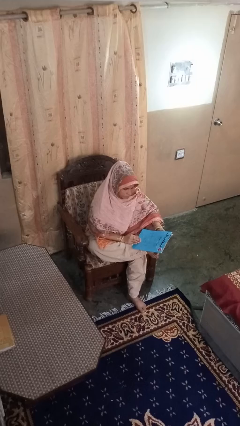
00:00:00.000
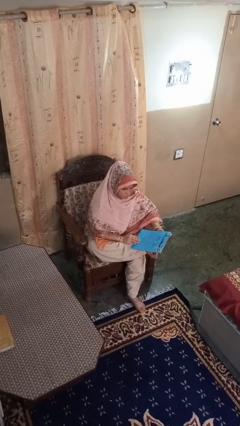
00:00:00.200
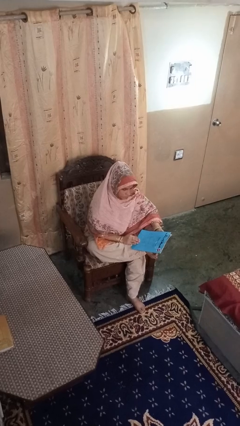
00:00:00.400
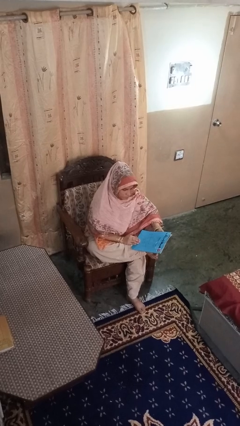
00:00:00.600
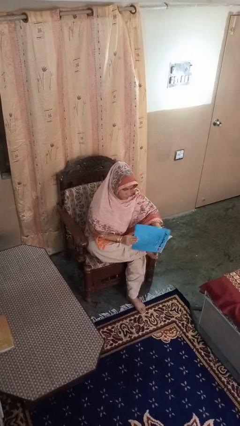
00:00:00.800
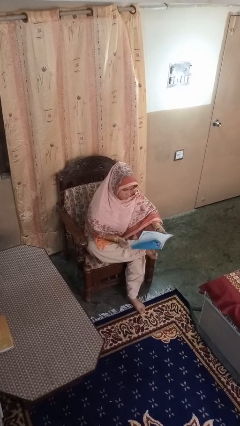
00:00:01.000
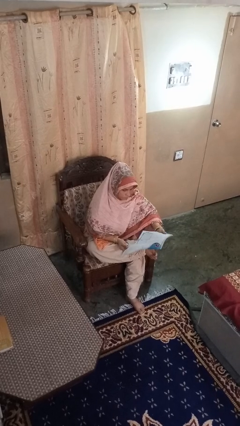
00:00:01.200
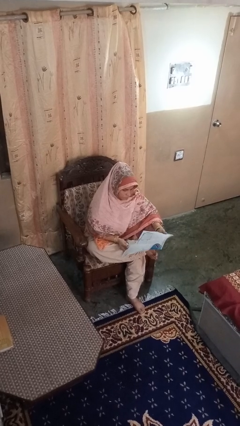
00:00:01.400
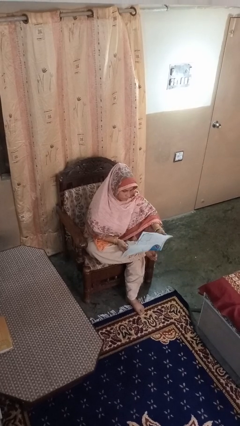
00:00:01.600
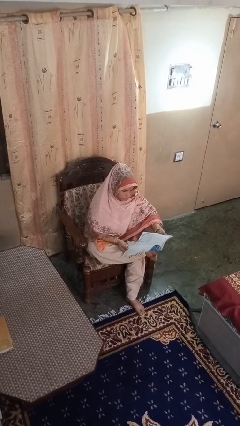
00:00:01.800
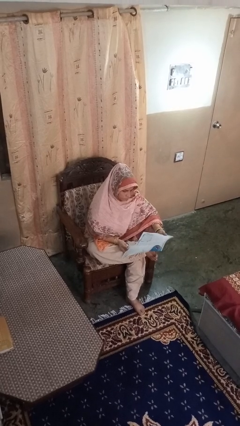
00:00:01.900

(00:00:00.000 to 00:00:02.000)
person reads magazine

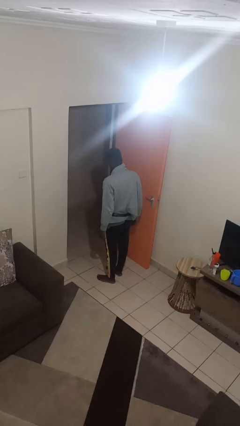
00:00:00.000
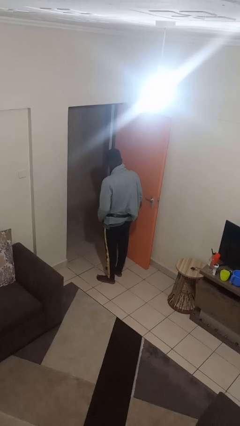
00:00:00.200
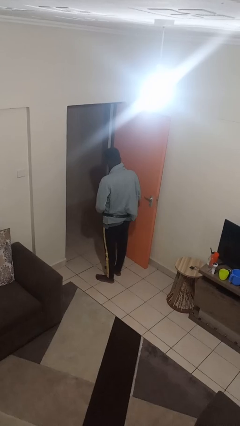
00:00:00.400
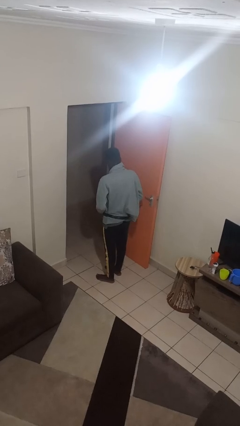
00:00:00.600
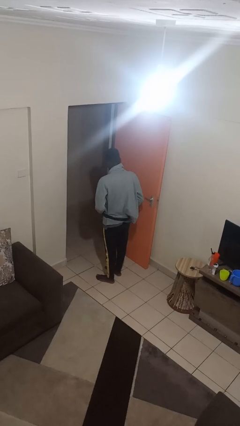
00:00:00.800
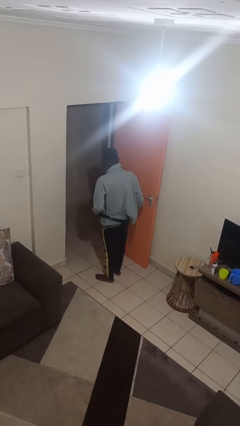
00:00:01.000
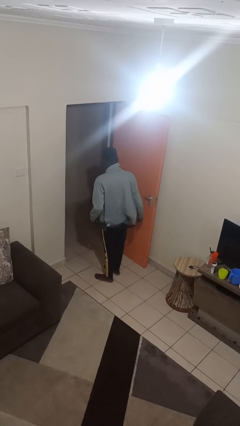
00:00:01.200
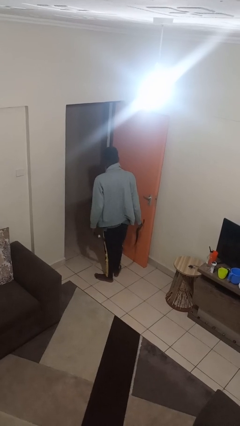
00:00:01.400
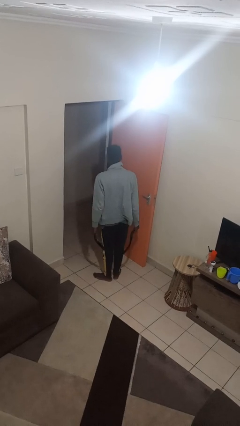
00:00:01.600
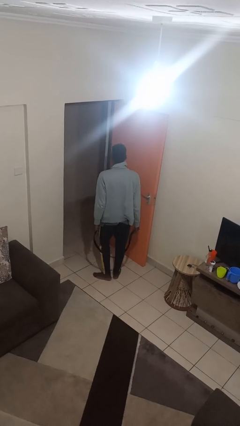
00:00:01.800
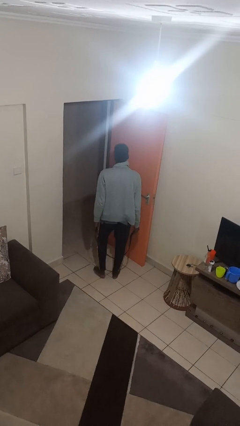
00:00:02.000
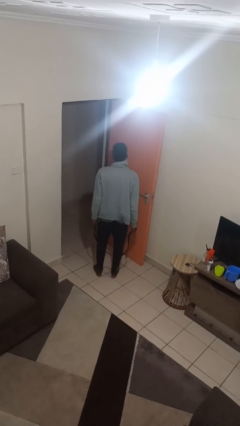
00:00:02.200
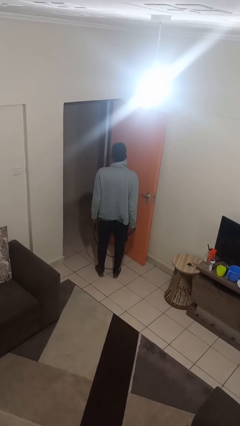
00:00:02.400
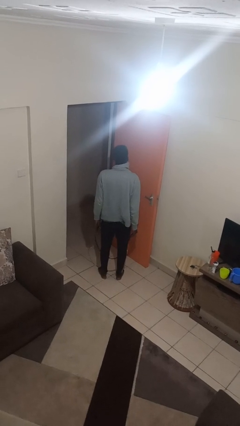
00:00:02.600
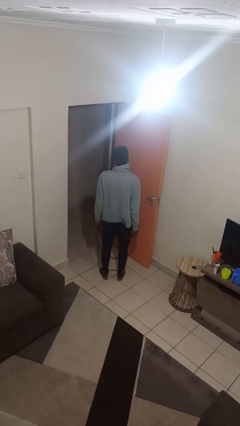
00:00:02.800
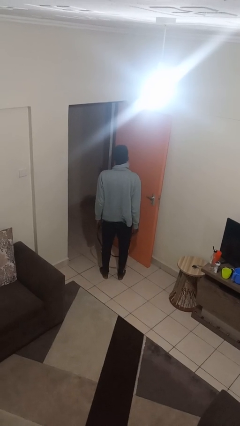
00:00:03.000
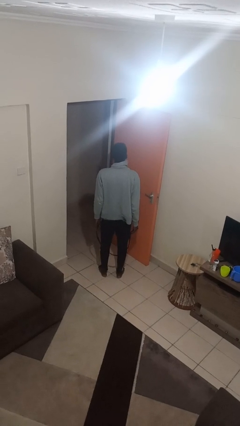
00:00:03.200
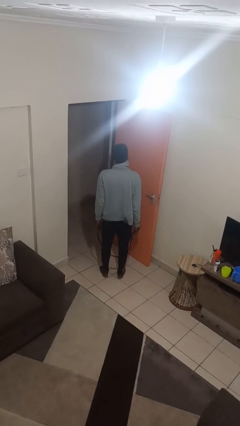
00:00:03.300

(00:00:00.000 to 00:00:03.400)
person takes off belt

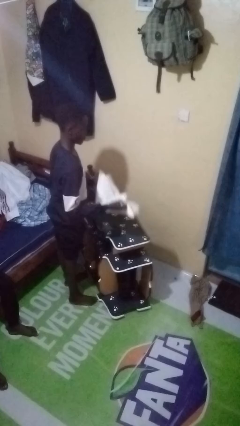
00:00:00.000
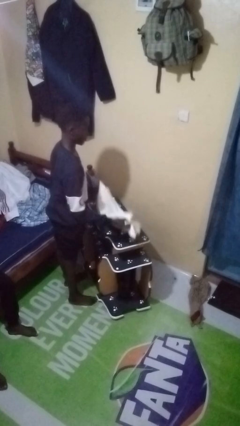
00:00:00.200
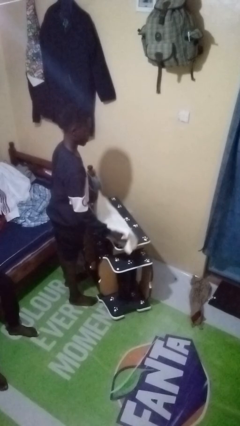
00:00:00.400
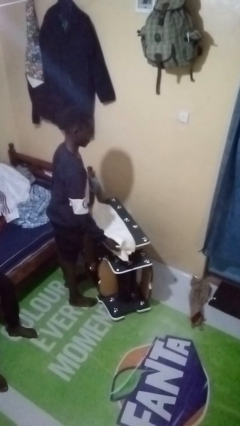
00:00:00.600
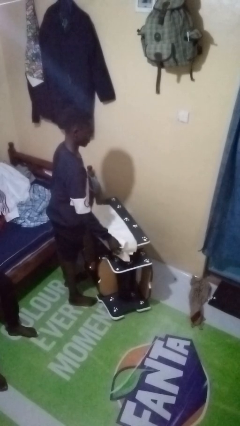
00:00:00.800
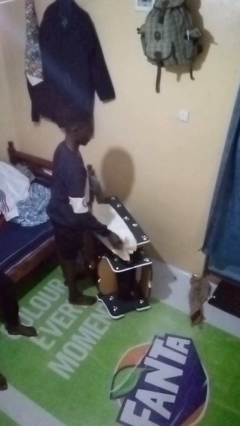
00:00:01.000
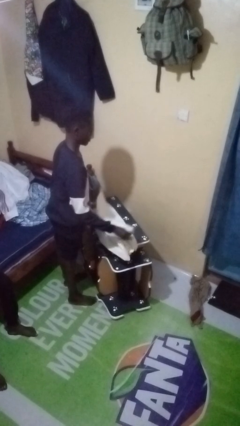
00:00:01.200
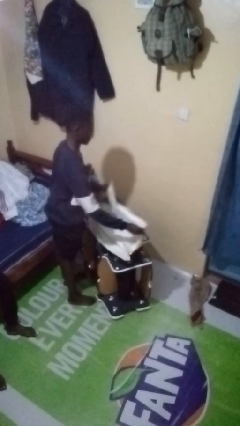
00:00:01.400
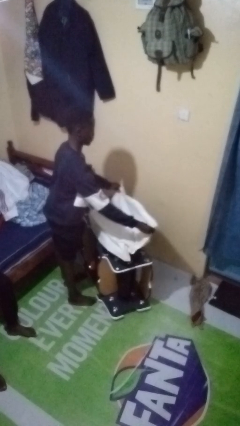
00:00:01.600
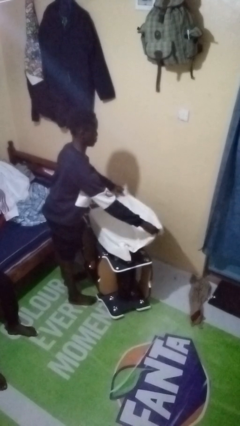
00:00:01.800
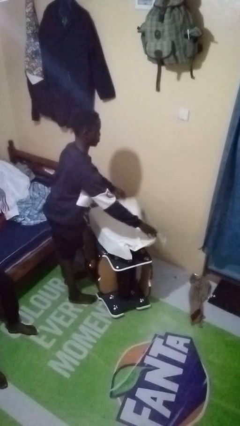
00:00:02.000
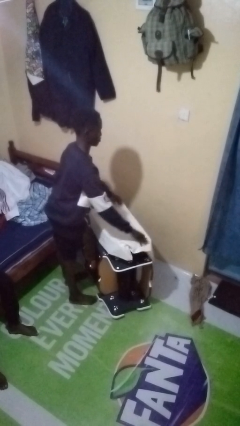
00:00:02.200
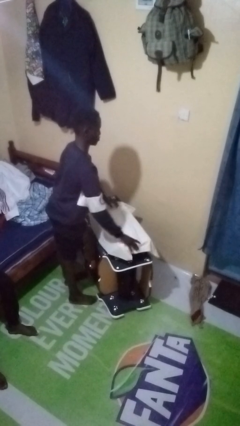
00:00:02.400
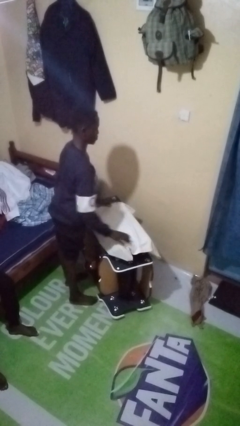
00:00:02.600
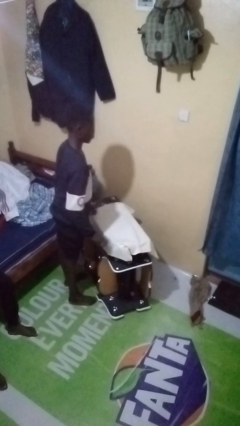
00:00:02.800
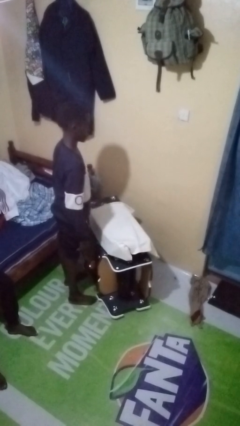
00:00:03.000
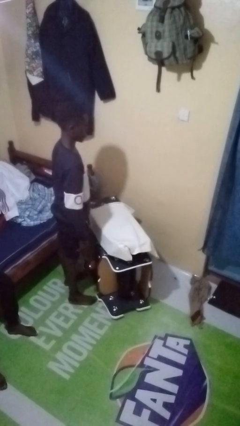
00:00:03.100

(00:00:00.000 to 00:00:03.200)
person spreads tablecloth

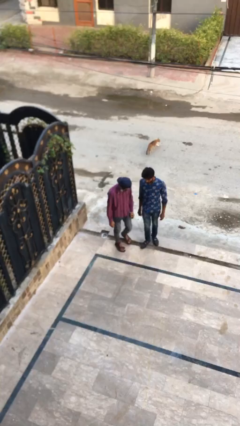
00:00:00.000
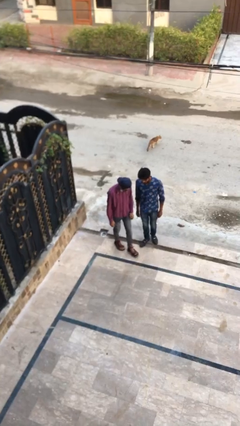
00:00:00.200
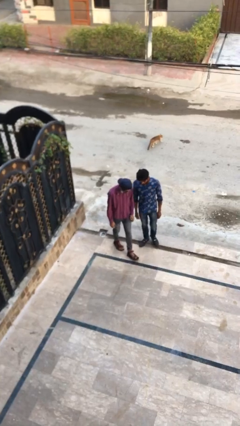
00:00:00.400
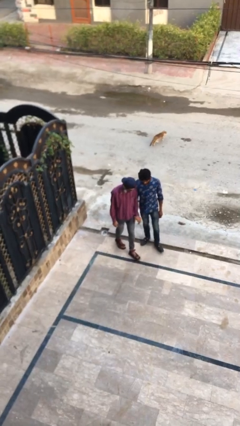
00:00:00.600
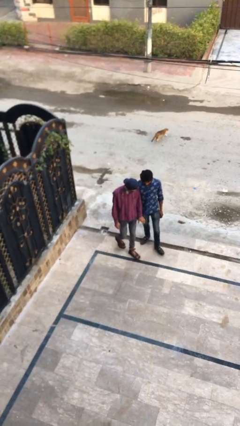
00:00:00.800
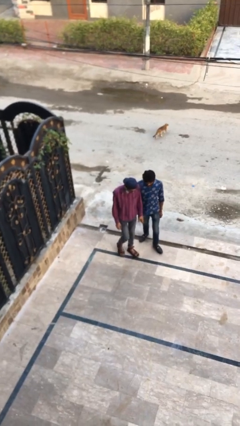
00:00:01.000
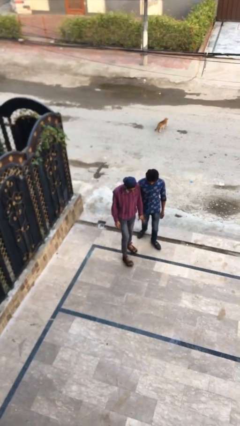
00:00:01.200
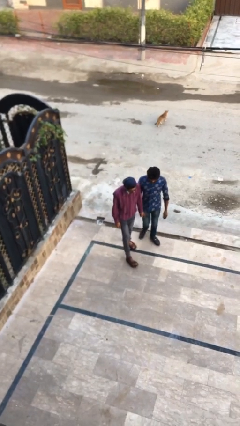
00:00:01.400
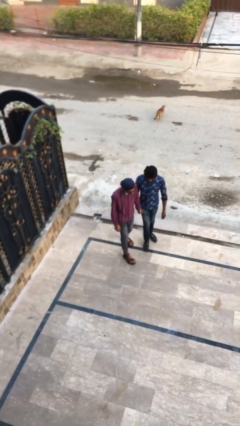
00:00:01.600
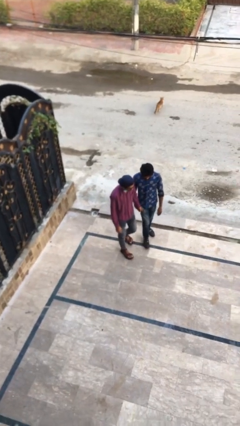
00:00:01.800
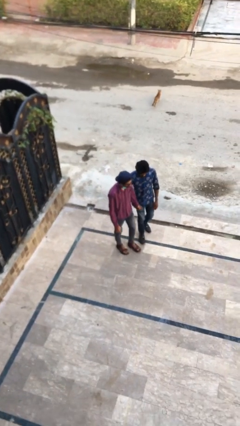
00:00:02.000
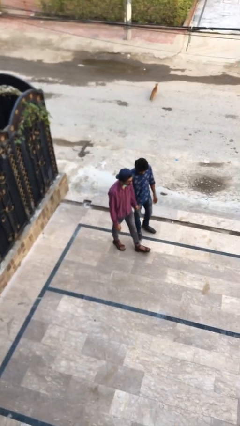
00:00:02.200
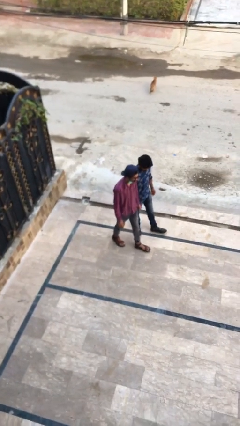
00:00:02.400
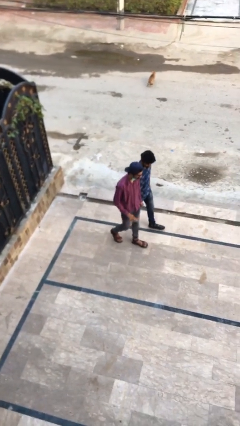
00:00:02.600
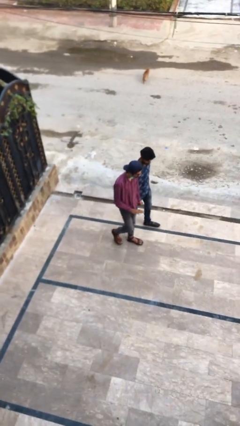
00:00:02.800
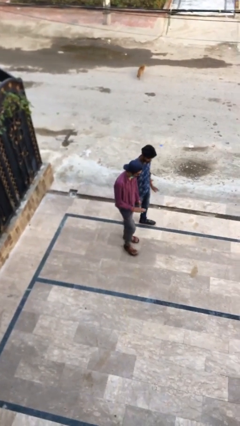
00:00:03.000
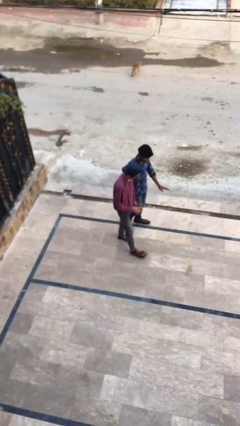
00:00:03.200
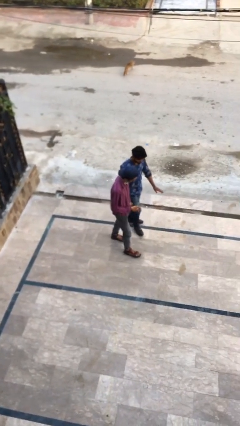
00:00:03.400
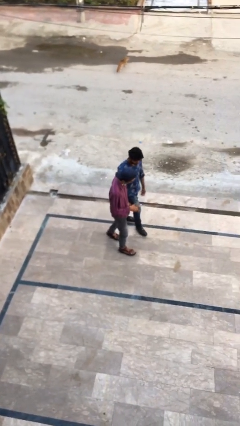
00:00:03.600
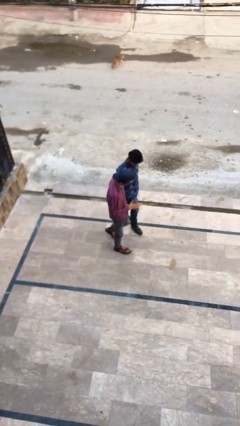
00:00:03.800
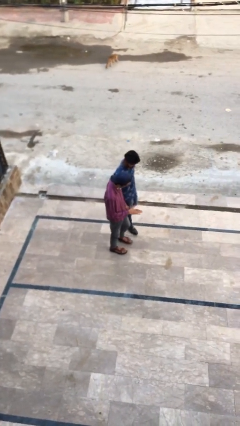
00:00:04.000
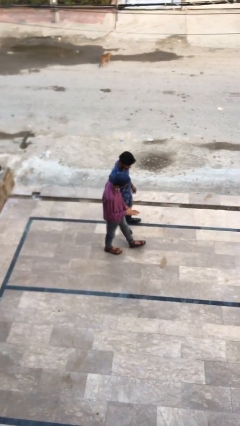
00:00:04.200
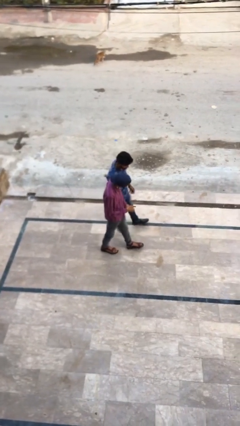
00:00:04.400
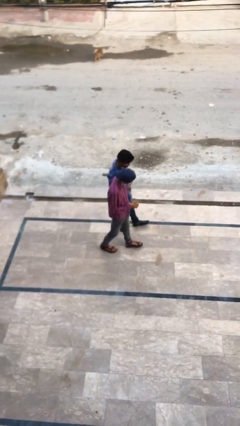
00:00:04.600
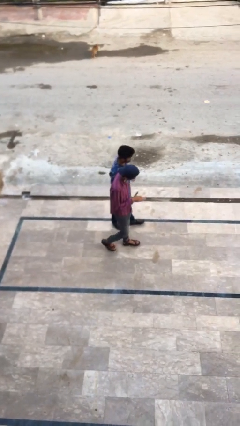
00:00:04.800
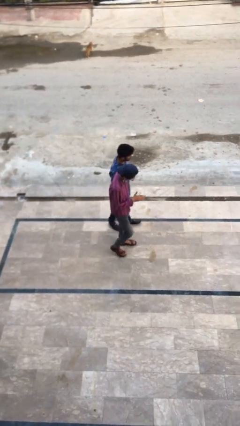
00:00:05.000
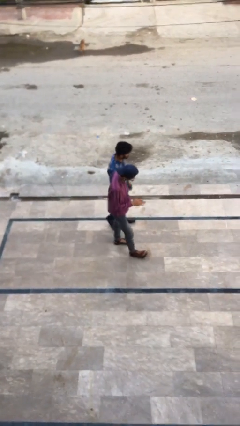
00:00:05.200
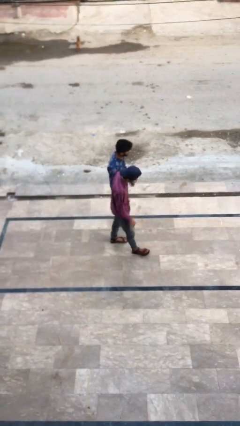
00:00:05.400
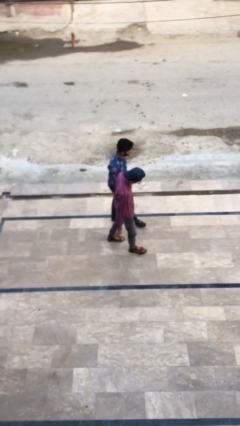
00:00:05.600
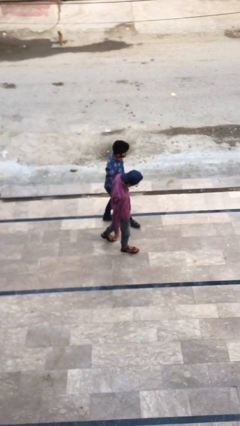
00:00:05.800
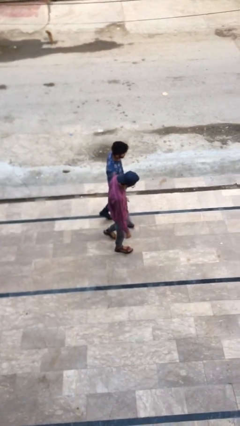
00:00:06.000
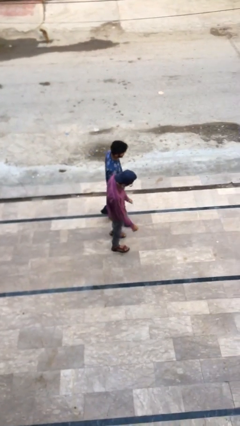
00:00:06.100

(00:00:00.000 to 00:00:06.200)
person holds hand

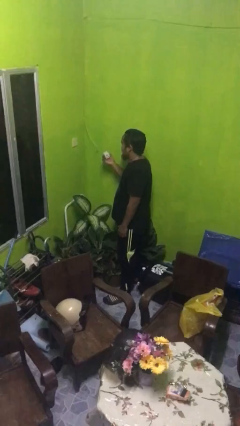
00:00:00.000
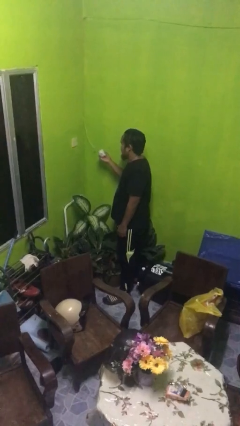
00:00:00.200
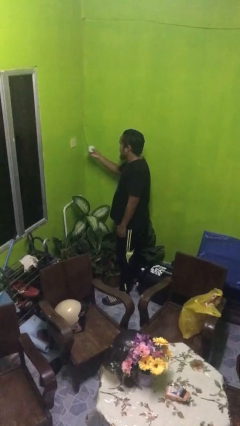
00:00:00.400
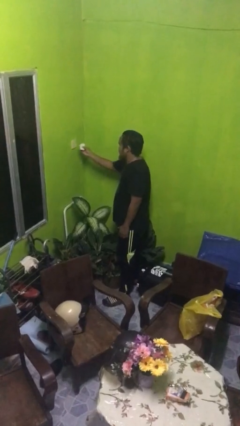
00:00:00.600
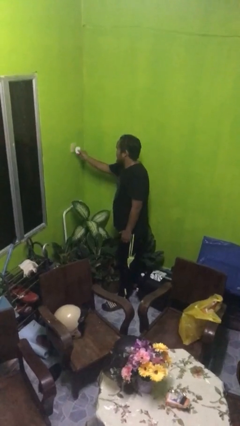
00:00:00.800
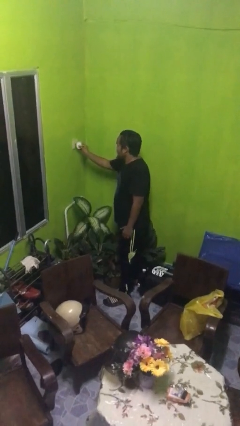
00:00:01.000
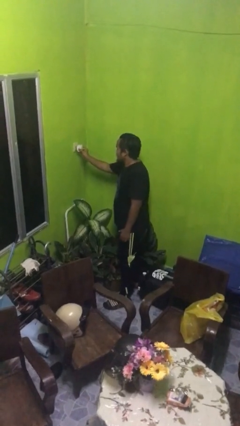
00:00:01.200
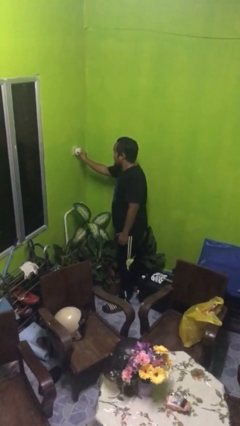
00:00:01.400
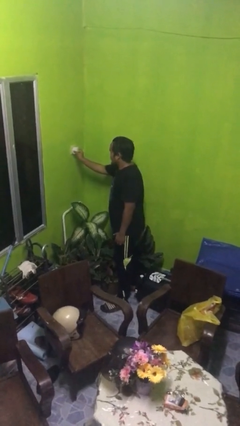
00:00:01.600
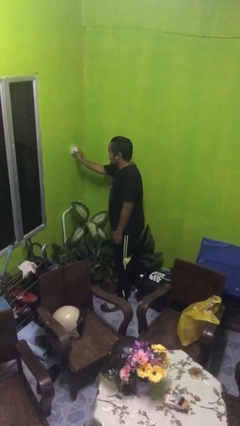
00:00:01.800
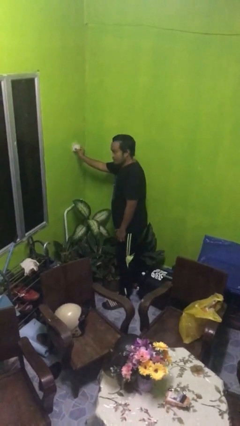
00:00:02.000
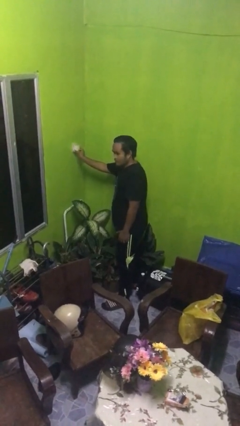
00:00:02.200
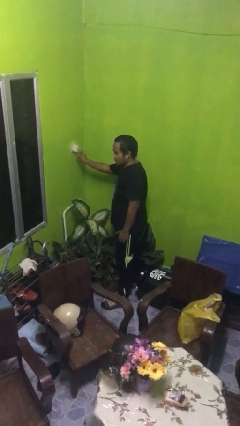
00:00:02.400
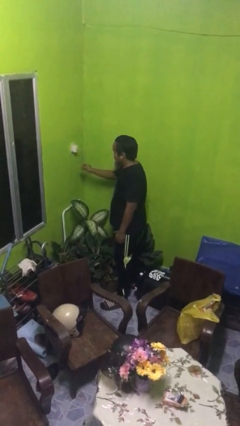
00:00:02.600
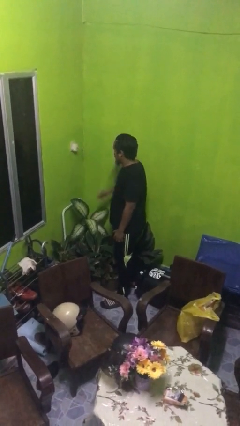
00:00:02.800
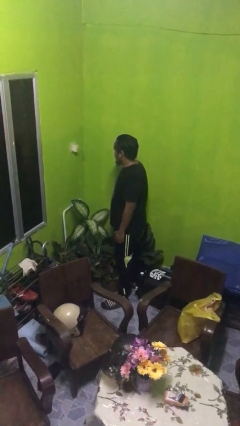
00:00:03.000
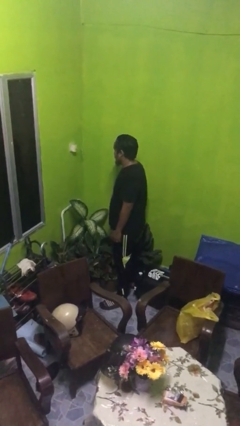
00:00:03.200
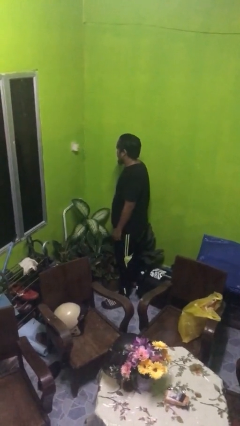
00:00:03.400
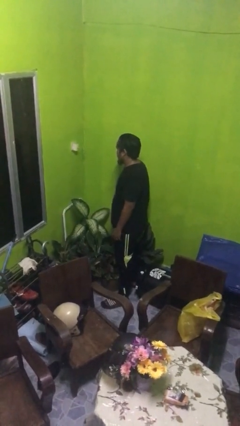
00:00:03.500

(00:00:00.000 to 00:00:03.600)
person plugs into electrical socket
